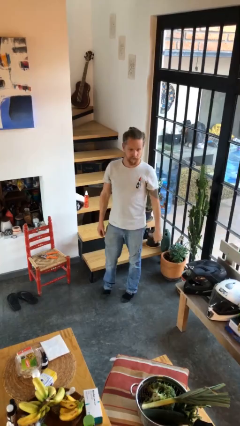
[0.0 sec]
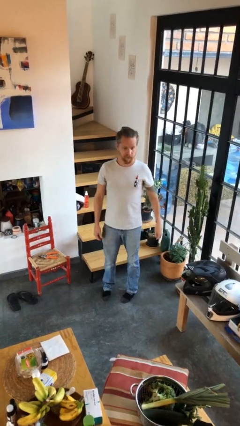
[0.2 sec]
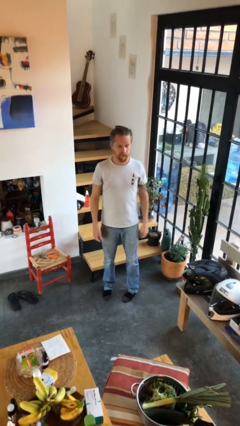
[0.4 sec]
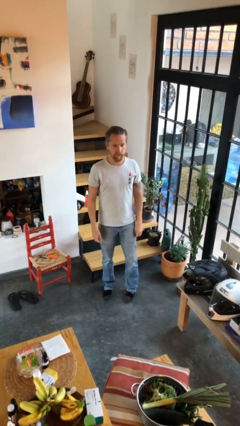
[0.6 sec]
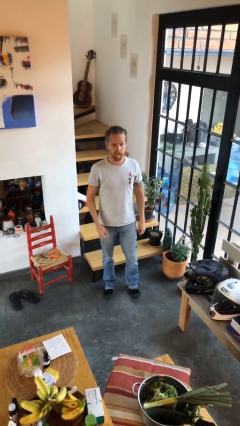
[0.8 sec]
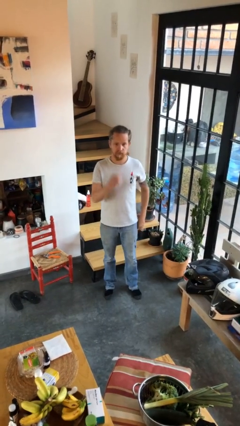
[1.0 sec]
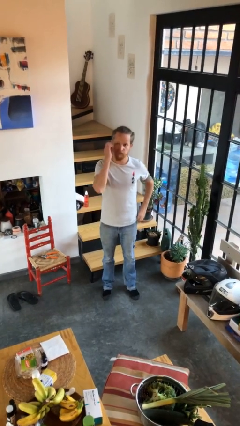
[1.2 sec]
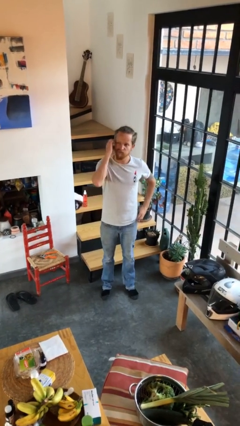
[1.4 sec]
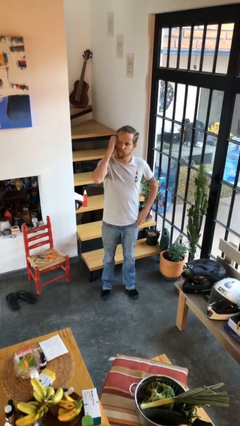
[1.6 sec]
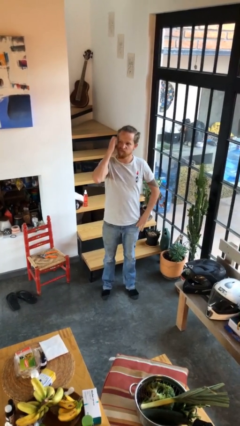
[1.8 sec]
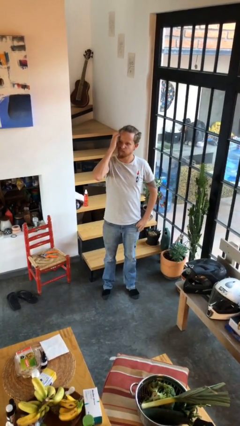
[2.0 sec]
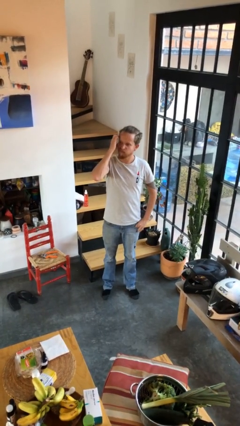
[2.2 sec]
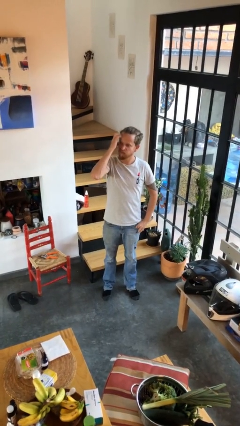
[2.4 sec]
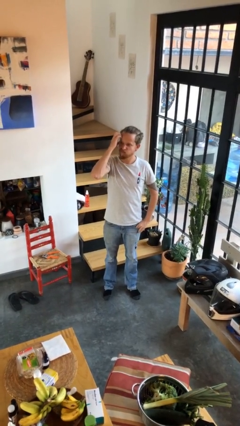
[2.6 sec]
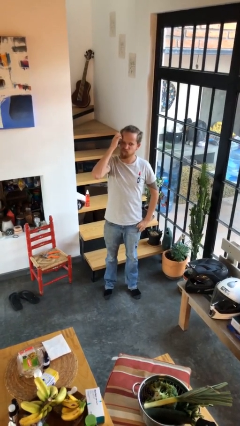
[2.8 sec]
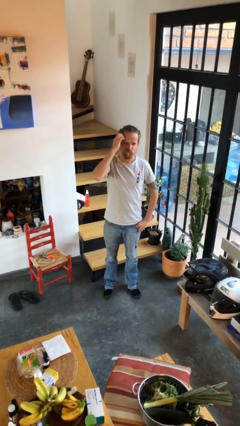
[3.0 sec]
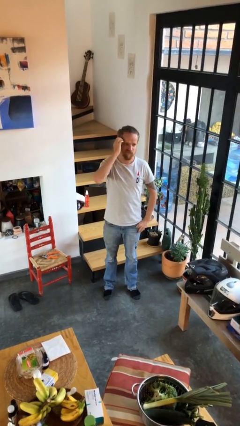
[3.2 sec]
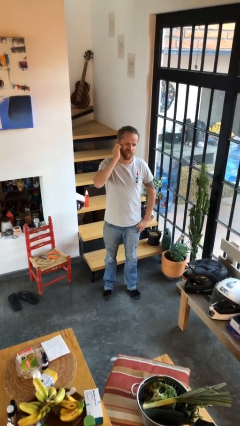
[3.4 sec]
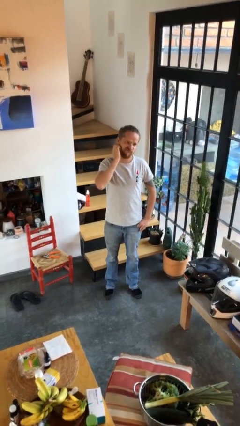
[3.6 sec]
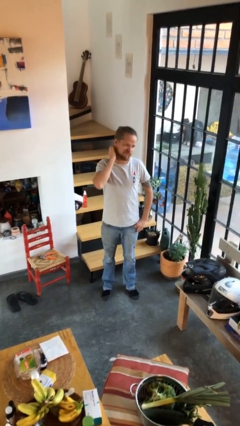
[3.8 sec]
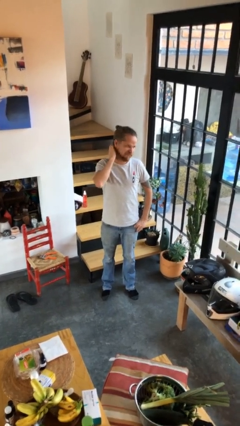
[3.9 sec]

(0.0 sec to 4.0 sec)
person scratches face

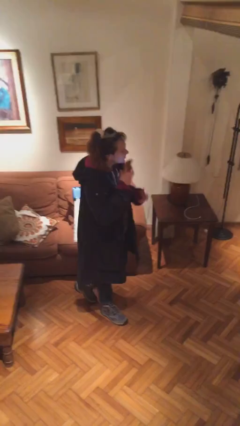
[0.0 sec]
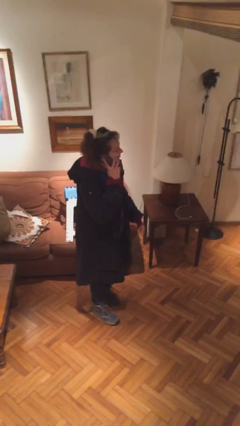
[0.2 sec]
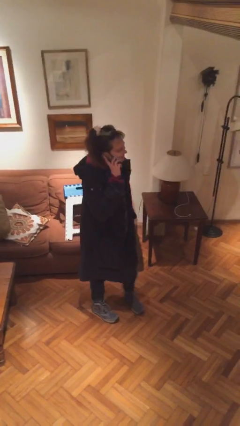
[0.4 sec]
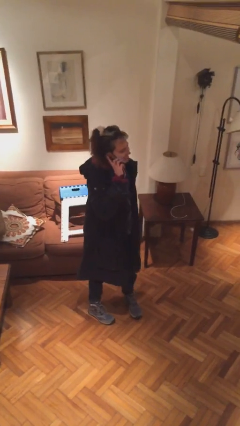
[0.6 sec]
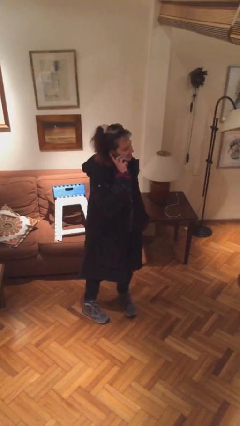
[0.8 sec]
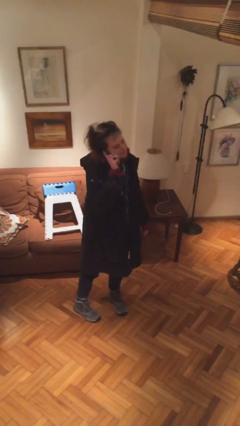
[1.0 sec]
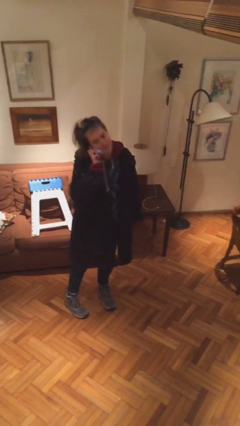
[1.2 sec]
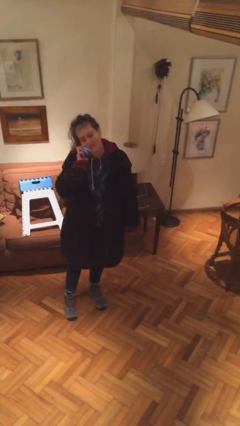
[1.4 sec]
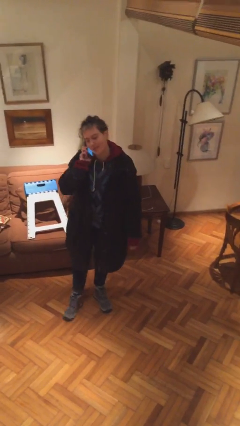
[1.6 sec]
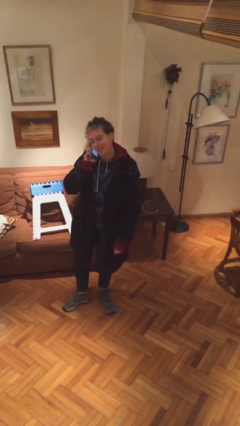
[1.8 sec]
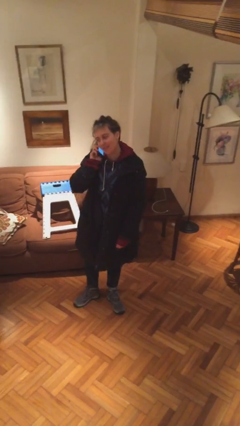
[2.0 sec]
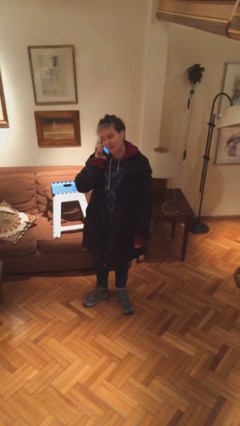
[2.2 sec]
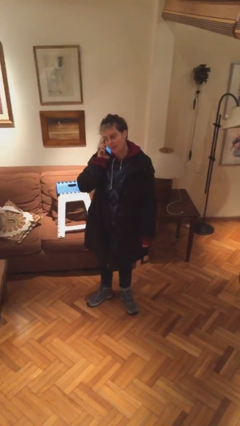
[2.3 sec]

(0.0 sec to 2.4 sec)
person talks on phone

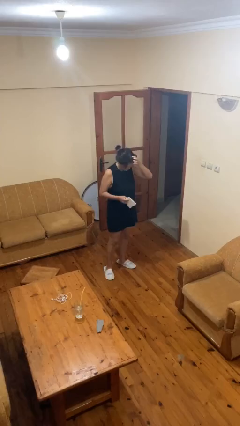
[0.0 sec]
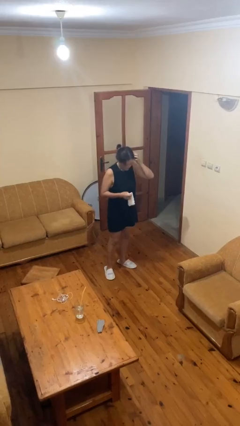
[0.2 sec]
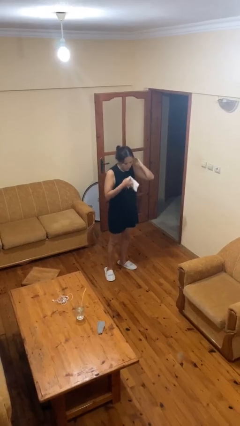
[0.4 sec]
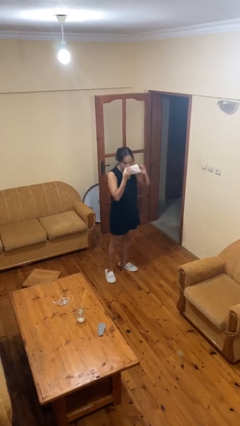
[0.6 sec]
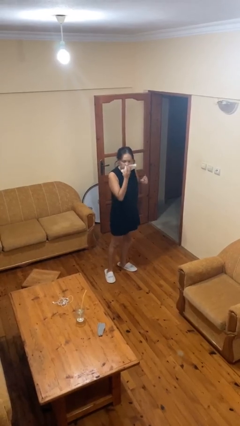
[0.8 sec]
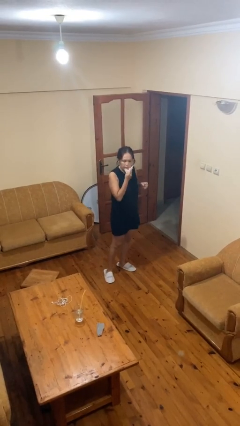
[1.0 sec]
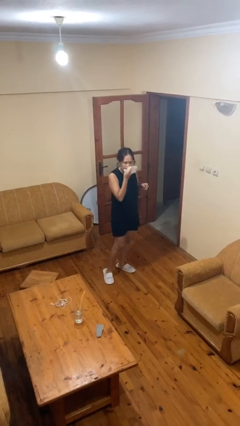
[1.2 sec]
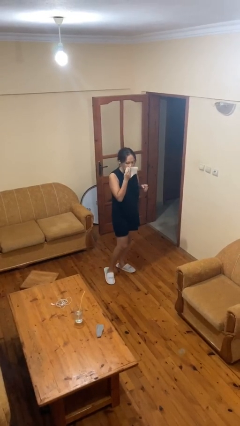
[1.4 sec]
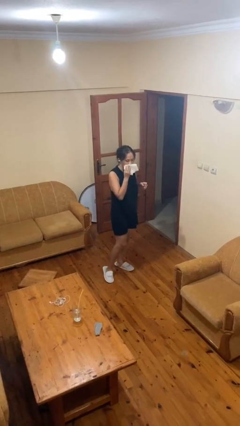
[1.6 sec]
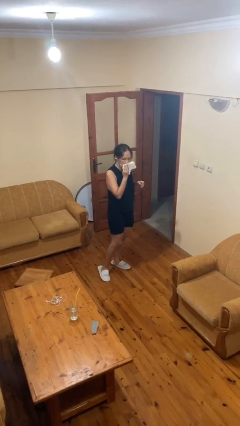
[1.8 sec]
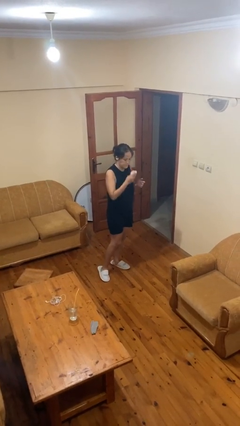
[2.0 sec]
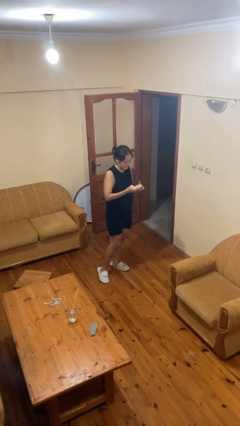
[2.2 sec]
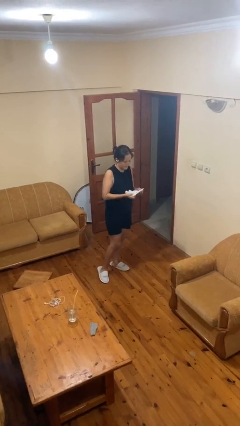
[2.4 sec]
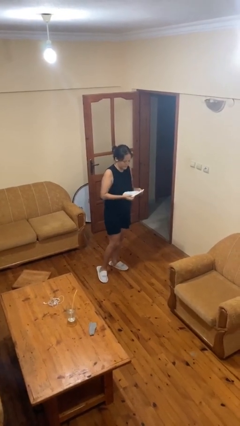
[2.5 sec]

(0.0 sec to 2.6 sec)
person wipes mouth with napkin

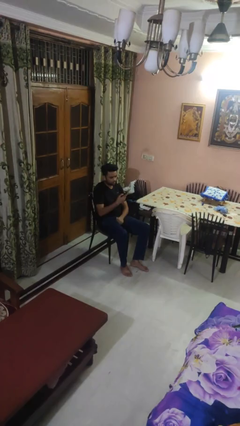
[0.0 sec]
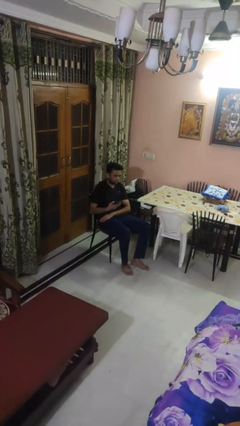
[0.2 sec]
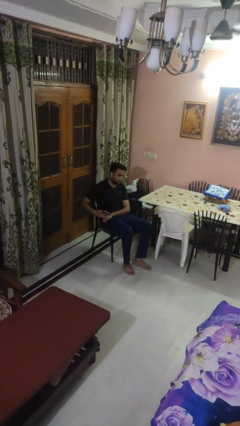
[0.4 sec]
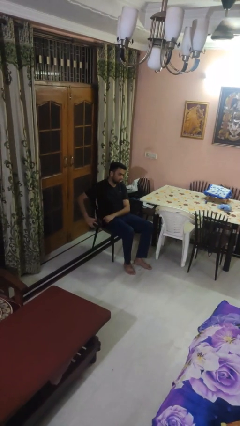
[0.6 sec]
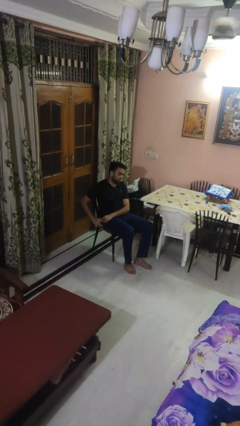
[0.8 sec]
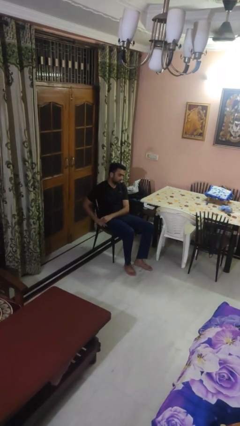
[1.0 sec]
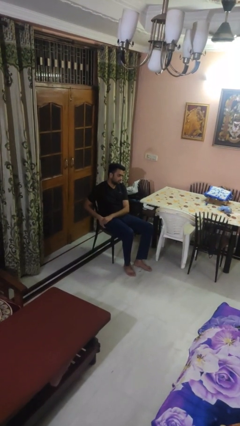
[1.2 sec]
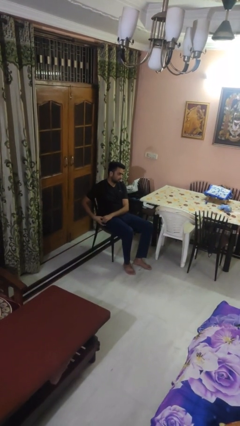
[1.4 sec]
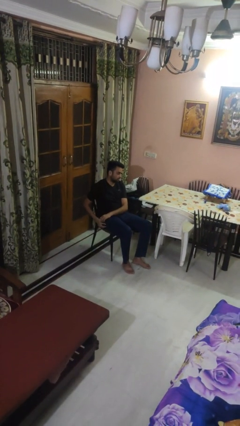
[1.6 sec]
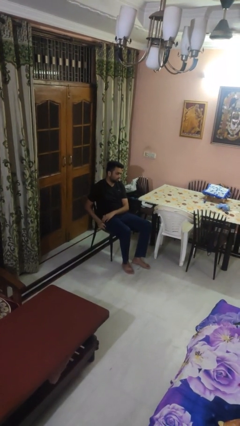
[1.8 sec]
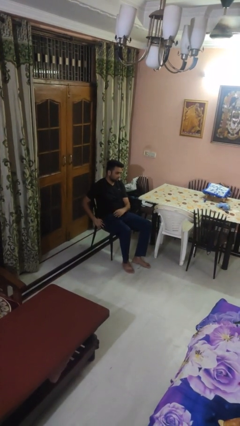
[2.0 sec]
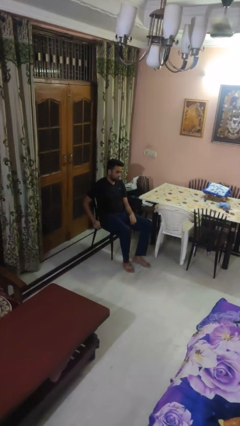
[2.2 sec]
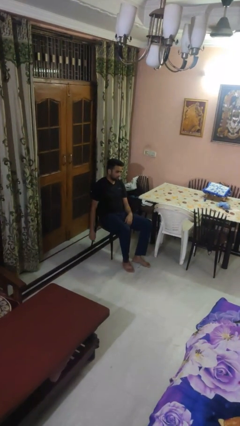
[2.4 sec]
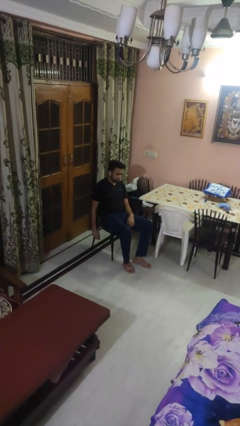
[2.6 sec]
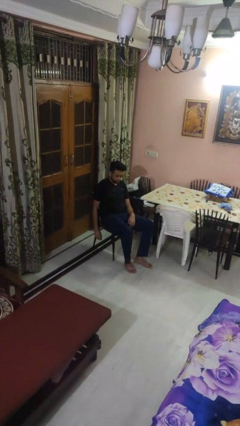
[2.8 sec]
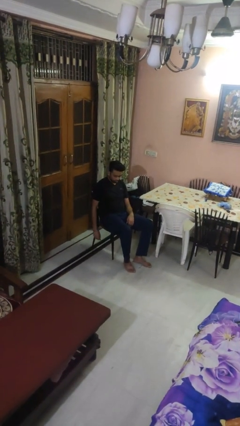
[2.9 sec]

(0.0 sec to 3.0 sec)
person puts phone into pocket

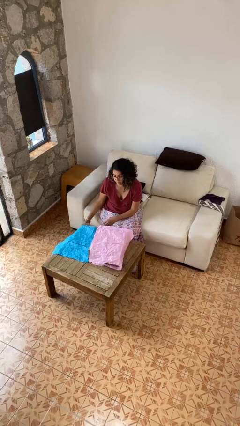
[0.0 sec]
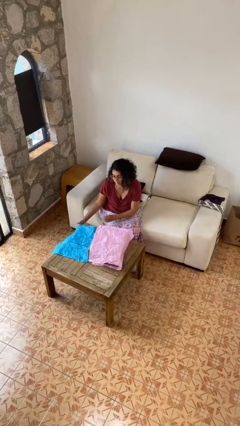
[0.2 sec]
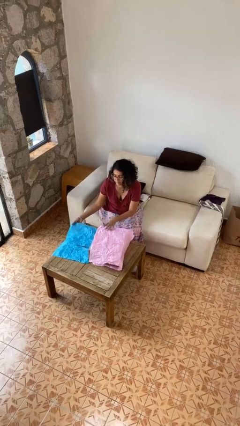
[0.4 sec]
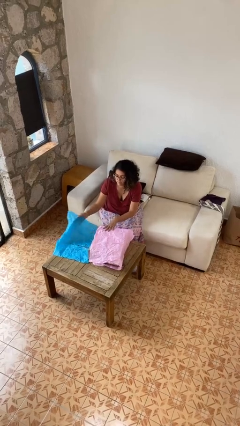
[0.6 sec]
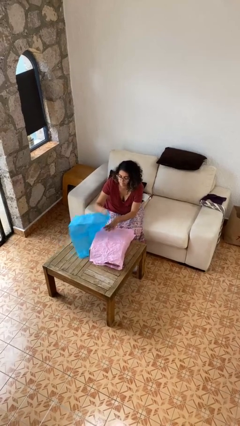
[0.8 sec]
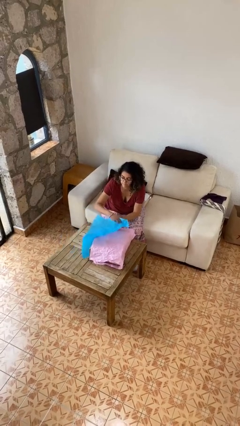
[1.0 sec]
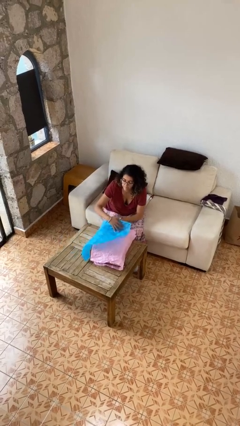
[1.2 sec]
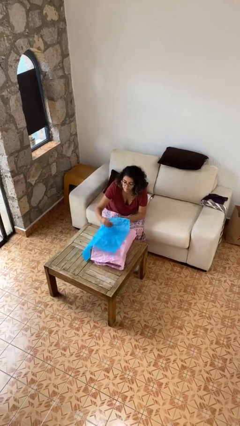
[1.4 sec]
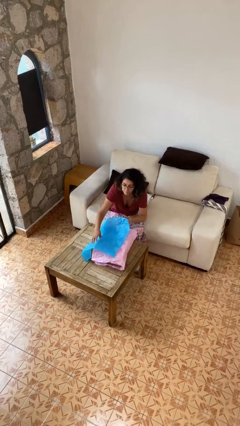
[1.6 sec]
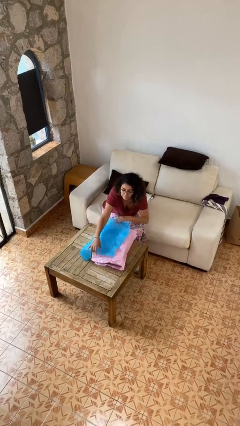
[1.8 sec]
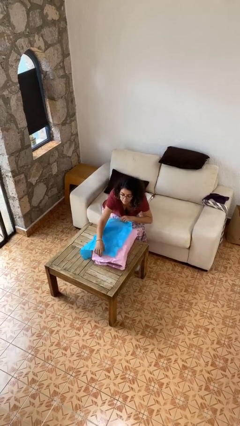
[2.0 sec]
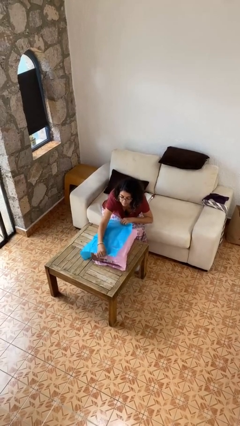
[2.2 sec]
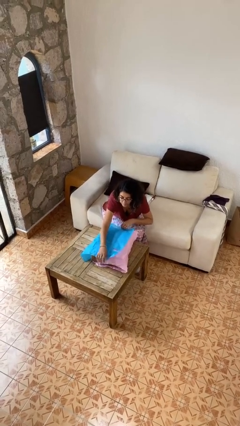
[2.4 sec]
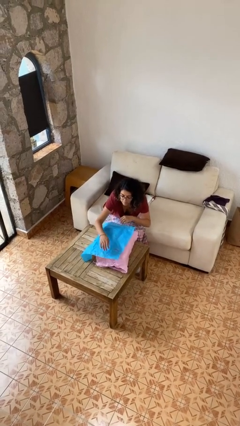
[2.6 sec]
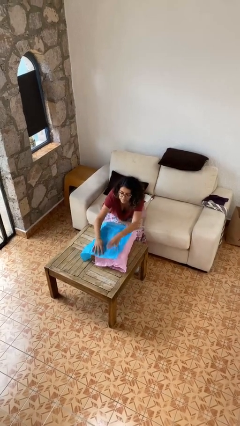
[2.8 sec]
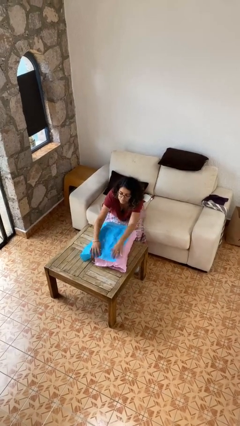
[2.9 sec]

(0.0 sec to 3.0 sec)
person wraps box

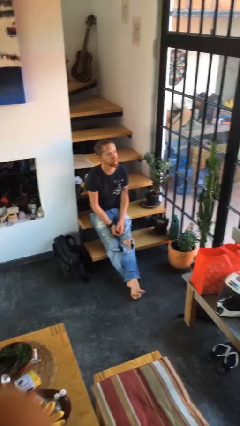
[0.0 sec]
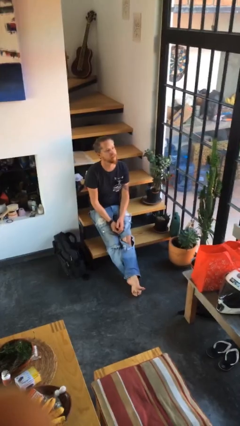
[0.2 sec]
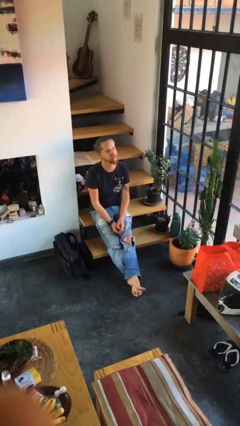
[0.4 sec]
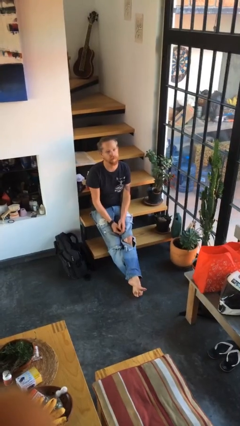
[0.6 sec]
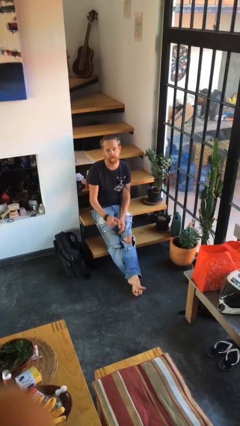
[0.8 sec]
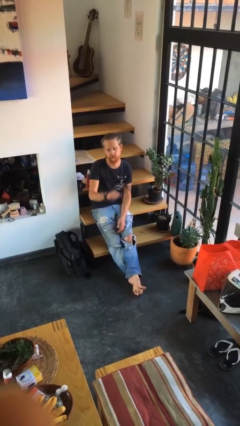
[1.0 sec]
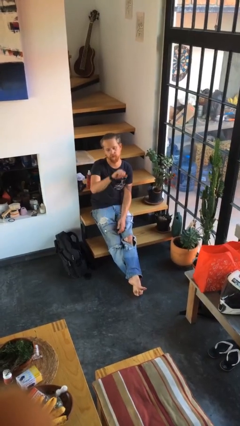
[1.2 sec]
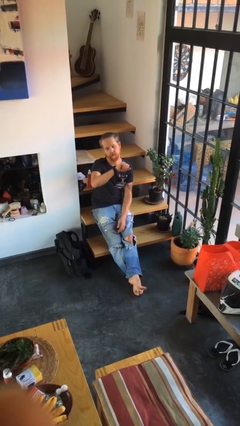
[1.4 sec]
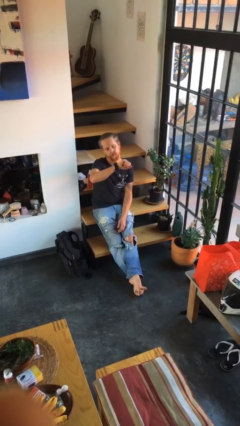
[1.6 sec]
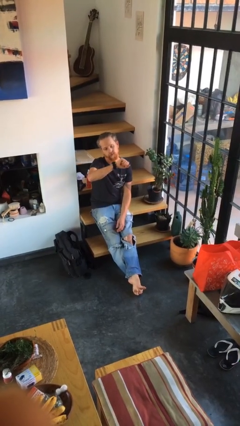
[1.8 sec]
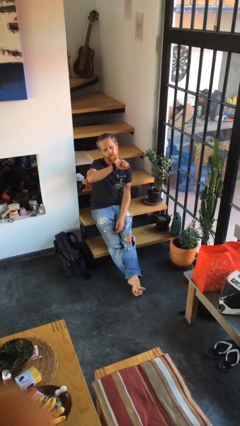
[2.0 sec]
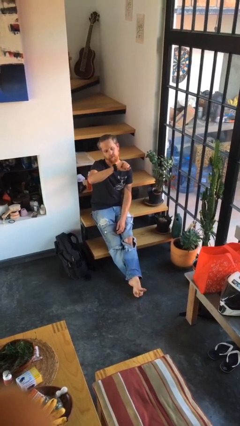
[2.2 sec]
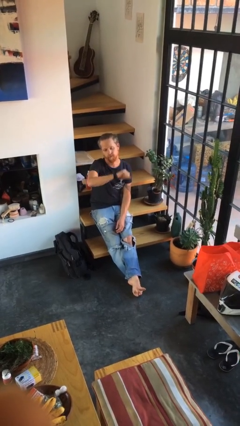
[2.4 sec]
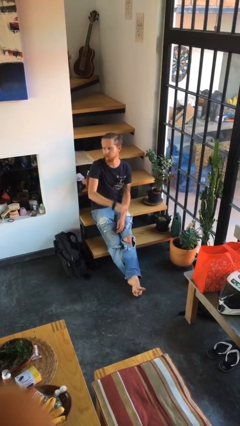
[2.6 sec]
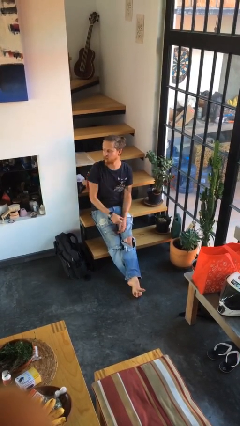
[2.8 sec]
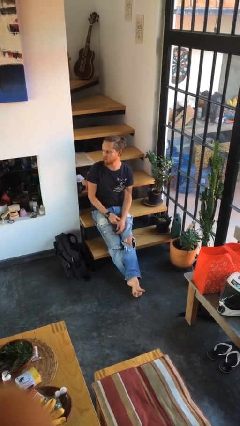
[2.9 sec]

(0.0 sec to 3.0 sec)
person looks at wristwatch
